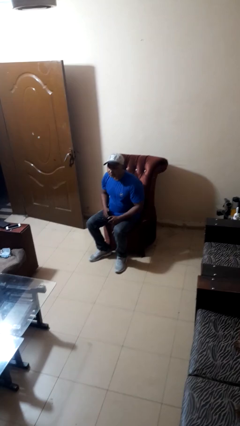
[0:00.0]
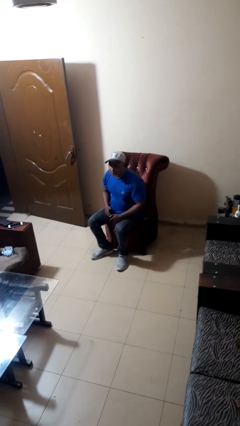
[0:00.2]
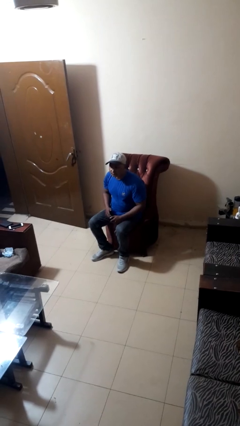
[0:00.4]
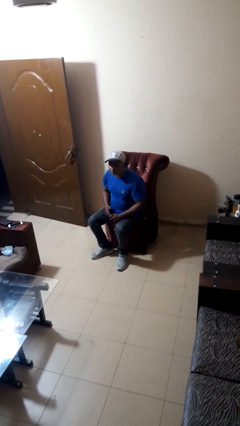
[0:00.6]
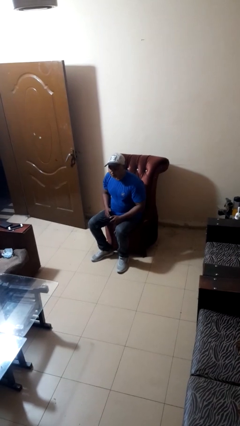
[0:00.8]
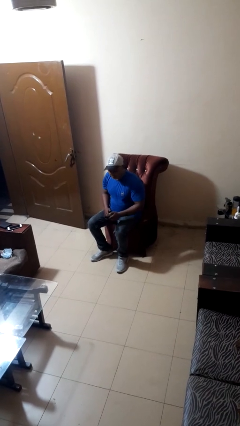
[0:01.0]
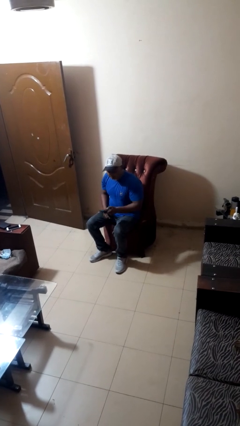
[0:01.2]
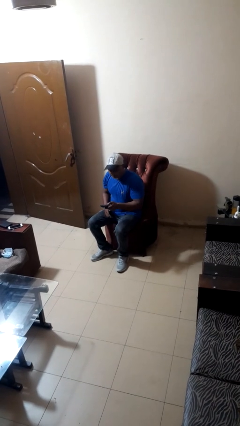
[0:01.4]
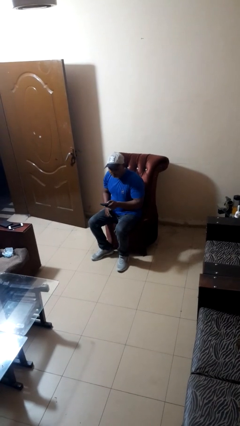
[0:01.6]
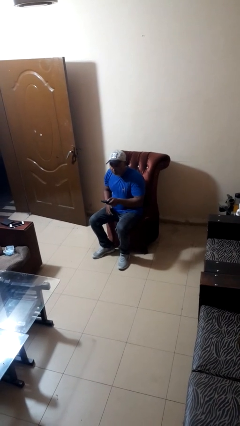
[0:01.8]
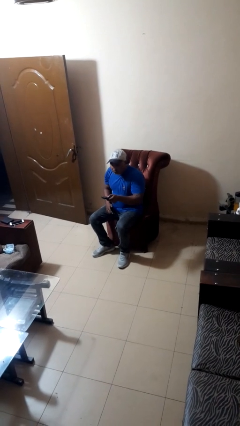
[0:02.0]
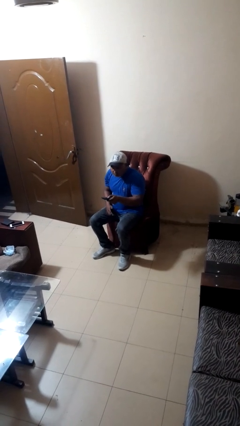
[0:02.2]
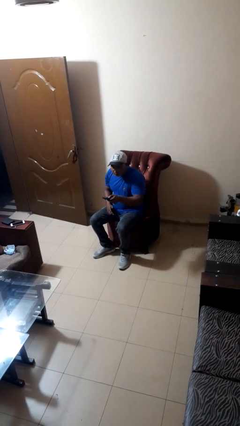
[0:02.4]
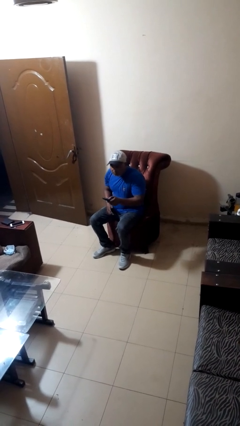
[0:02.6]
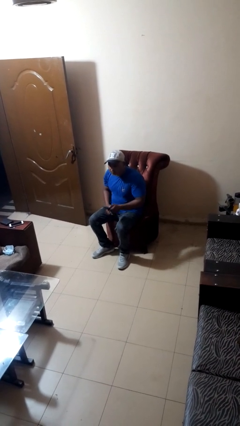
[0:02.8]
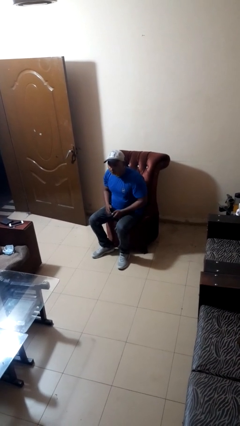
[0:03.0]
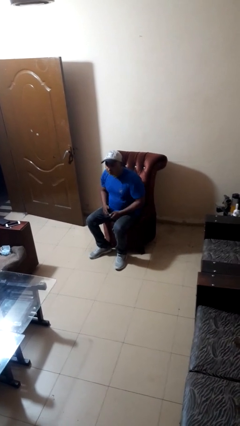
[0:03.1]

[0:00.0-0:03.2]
person uses television remote

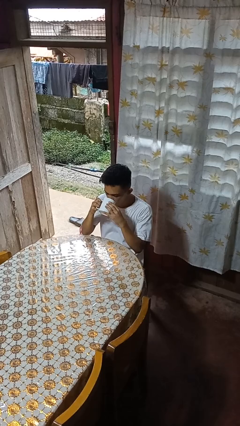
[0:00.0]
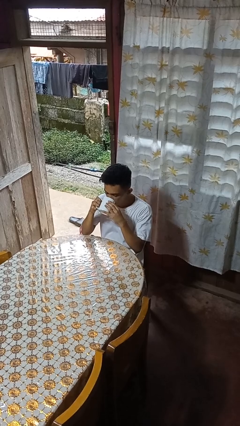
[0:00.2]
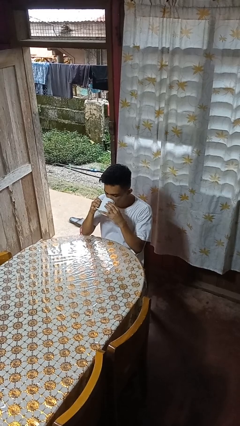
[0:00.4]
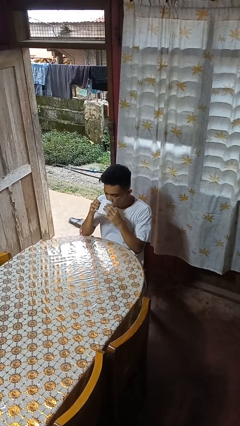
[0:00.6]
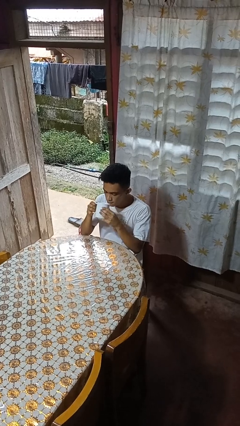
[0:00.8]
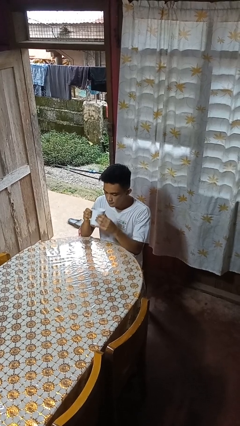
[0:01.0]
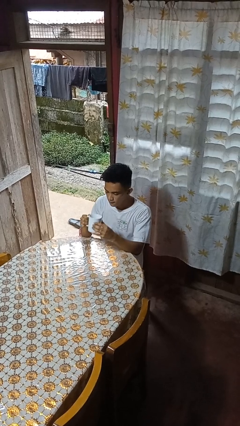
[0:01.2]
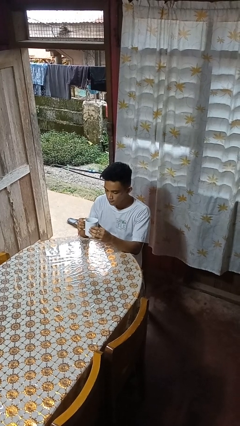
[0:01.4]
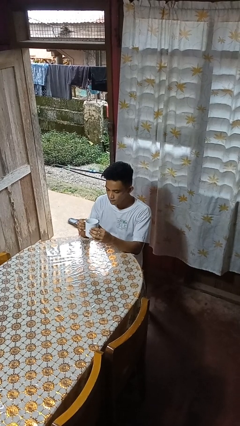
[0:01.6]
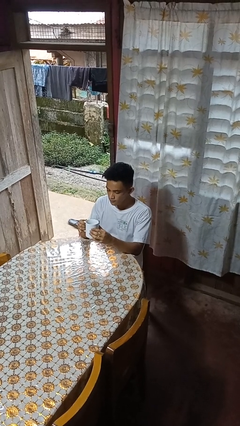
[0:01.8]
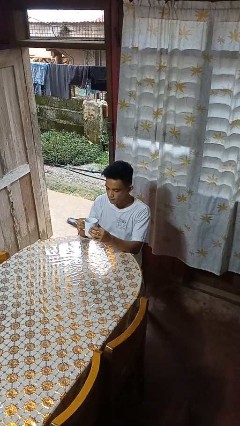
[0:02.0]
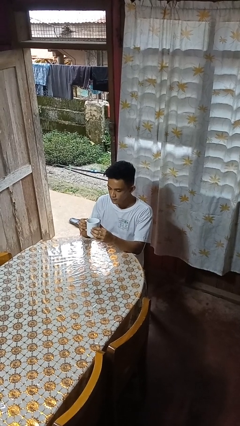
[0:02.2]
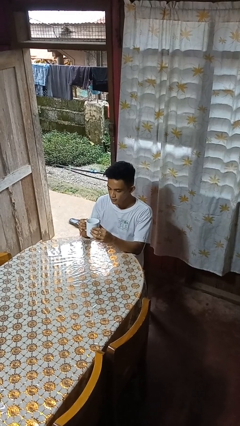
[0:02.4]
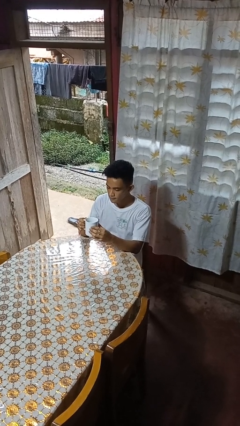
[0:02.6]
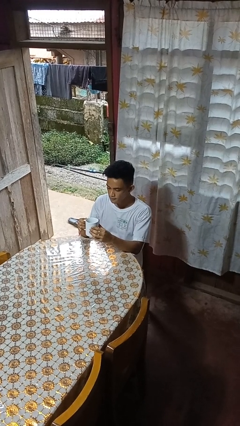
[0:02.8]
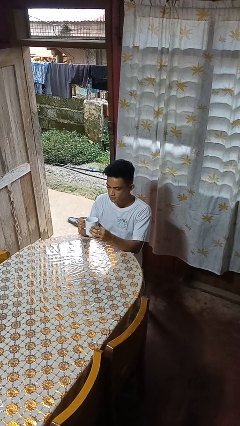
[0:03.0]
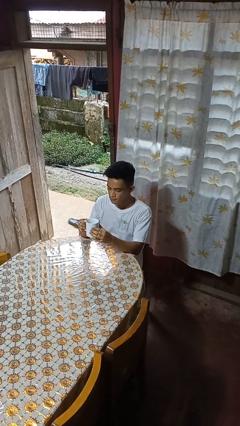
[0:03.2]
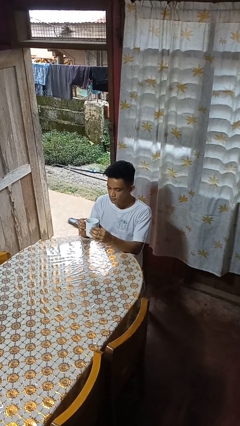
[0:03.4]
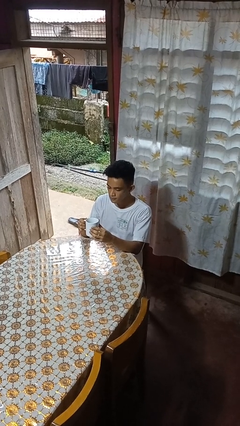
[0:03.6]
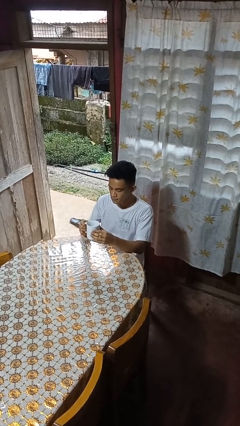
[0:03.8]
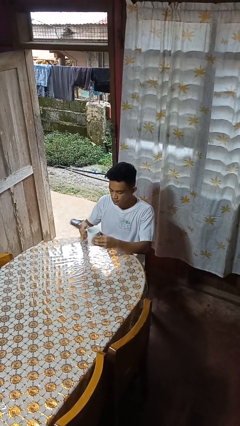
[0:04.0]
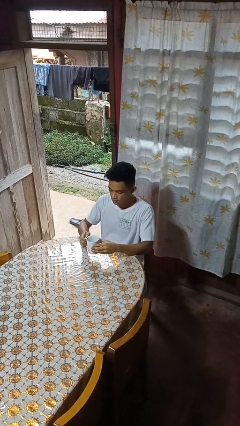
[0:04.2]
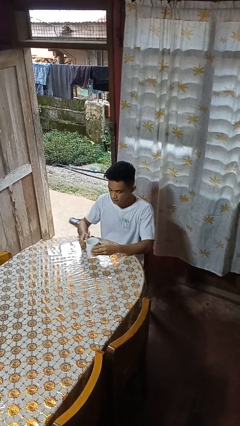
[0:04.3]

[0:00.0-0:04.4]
person drinks from mug

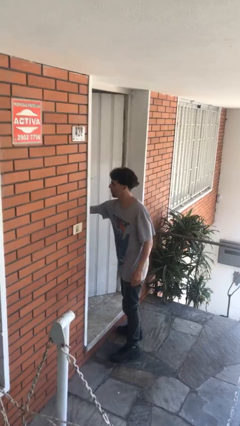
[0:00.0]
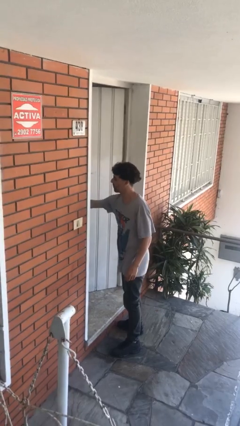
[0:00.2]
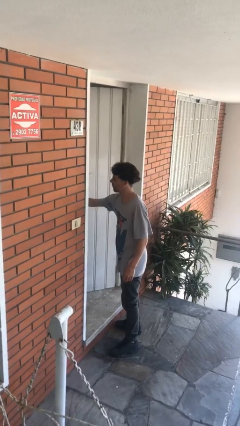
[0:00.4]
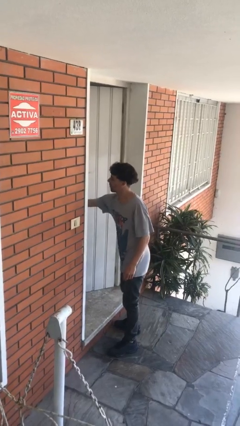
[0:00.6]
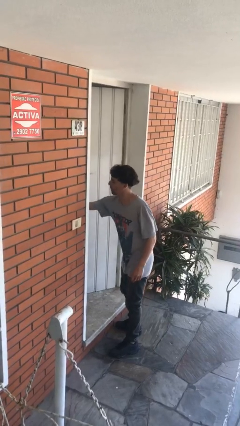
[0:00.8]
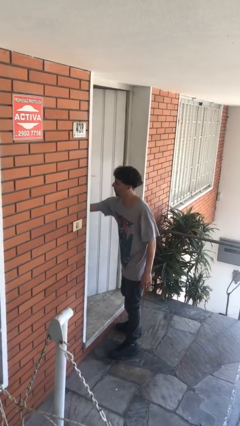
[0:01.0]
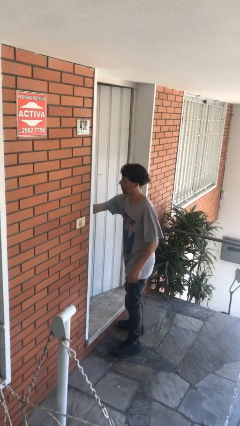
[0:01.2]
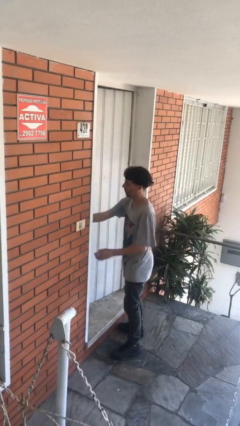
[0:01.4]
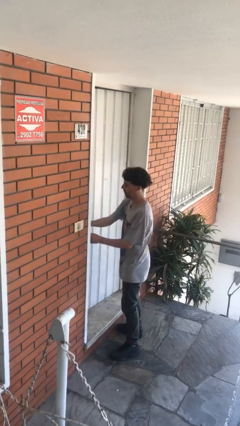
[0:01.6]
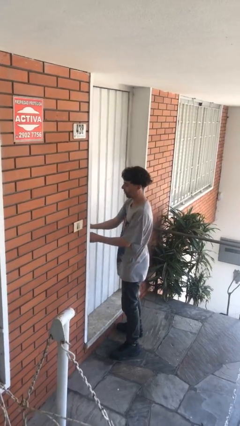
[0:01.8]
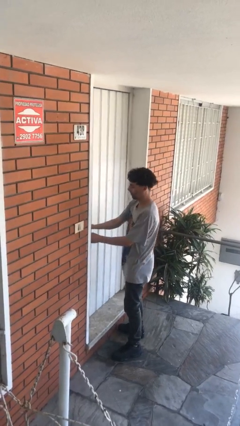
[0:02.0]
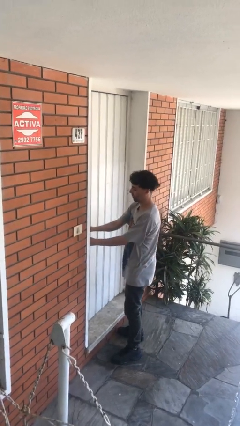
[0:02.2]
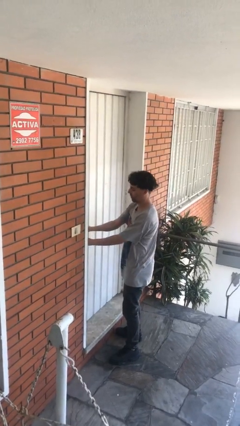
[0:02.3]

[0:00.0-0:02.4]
person closes facility door

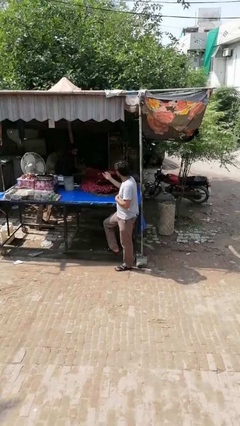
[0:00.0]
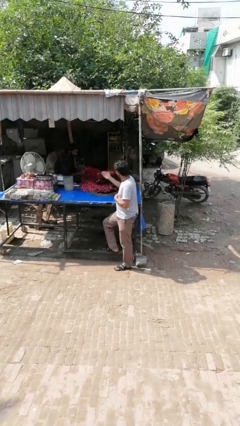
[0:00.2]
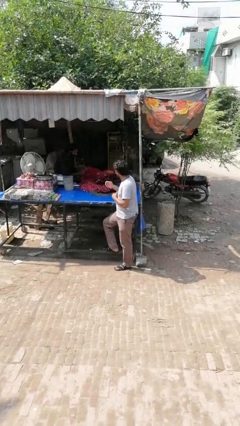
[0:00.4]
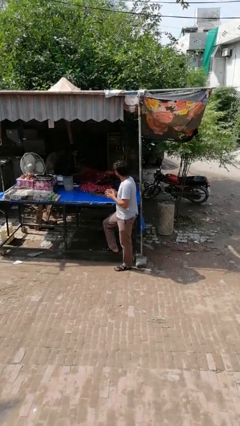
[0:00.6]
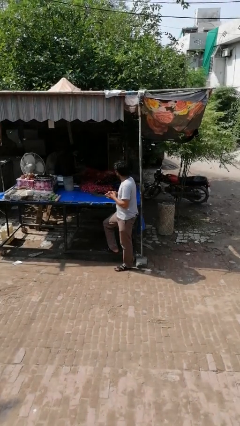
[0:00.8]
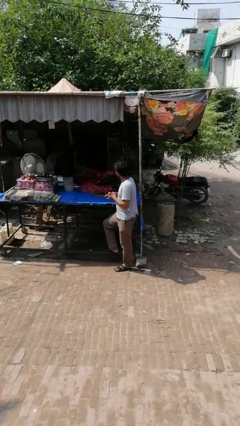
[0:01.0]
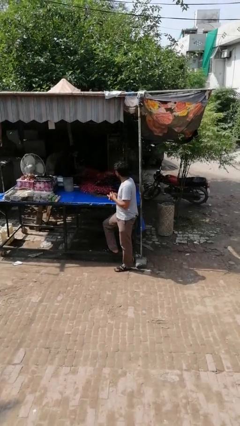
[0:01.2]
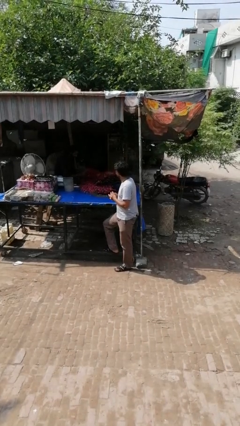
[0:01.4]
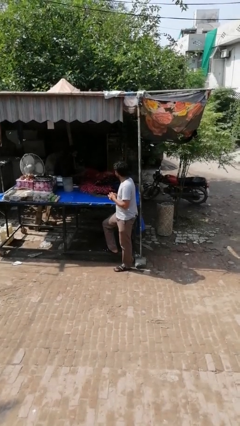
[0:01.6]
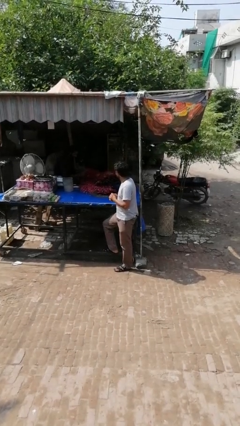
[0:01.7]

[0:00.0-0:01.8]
person talks to person

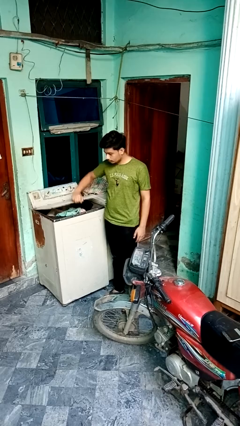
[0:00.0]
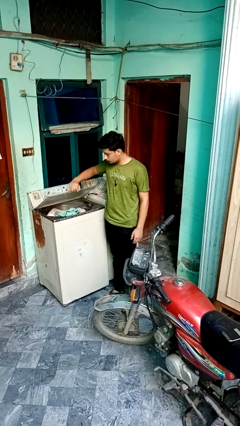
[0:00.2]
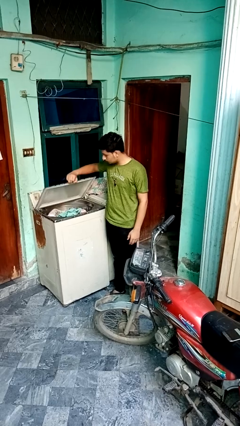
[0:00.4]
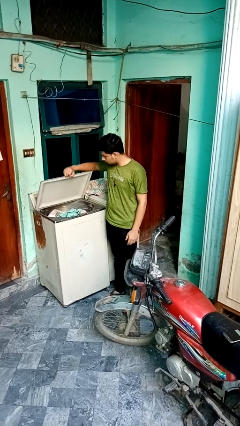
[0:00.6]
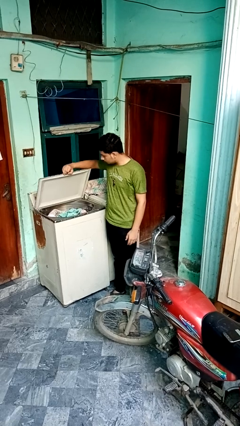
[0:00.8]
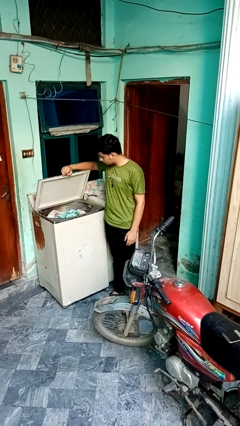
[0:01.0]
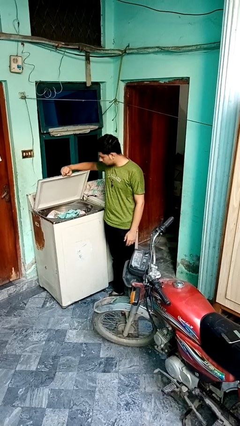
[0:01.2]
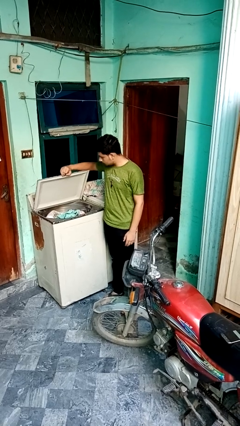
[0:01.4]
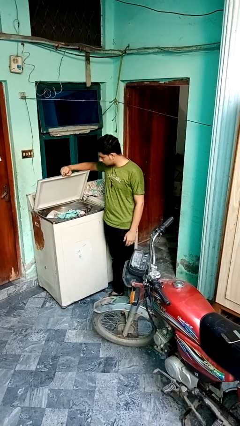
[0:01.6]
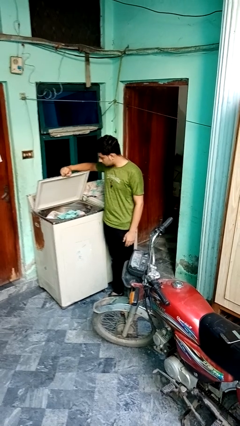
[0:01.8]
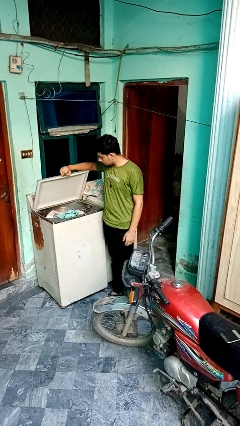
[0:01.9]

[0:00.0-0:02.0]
person opens clothes washer

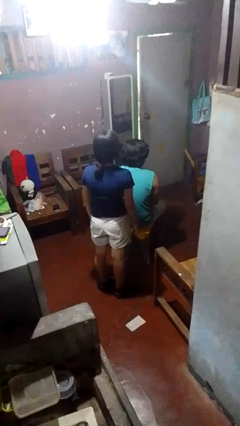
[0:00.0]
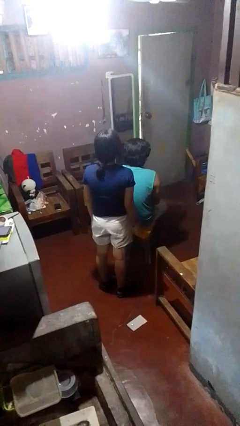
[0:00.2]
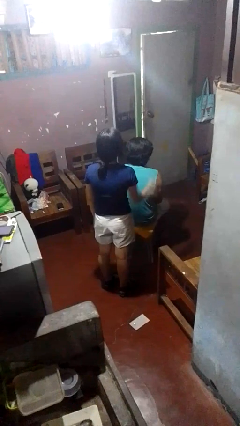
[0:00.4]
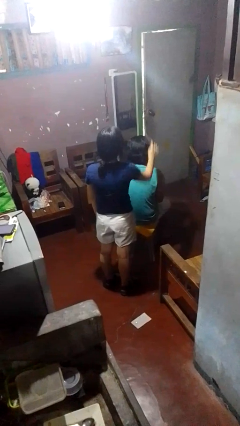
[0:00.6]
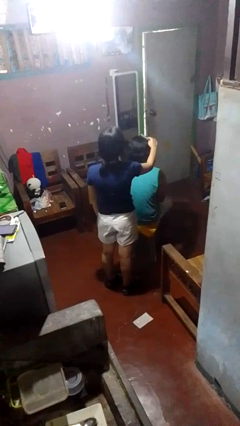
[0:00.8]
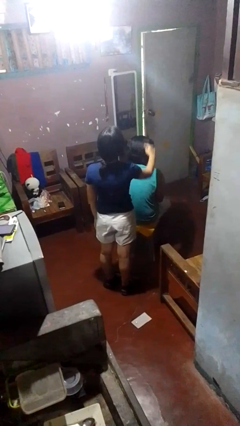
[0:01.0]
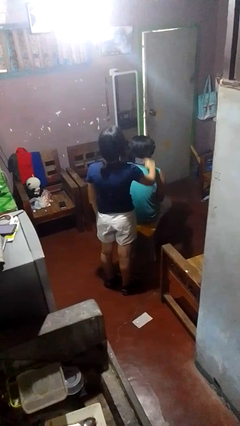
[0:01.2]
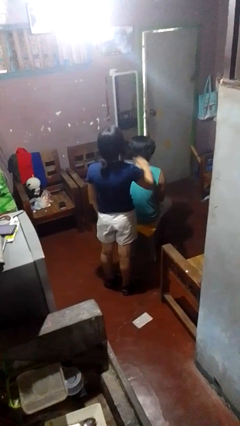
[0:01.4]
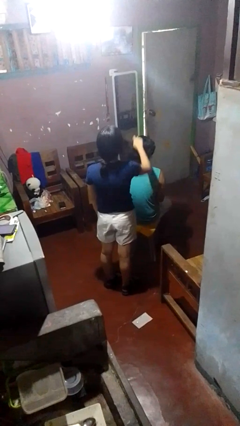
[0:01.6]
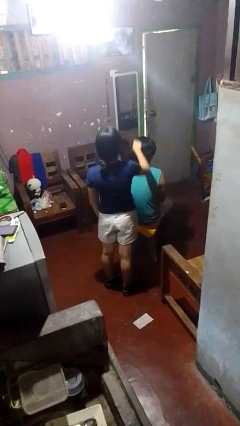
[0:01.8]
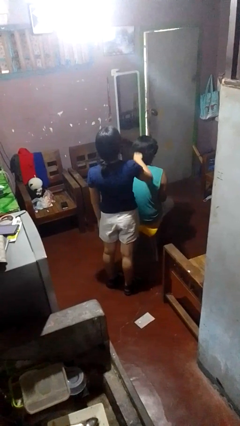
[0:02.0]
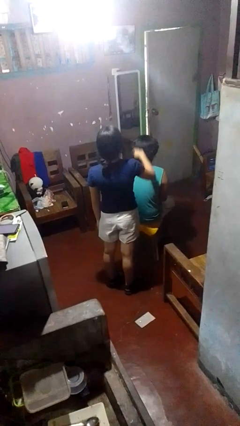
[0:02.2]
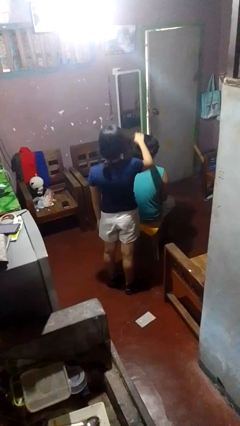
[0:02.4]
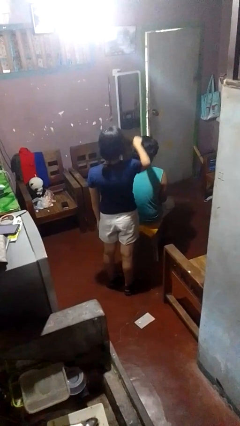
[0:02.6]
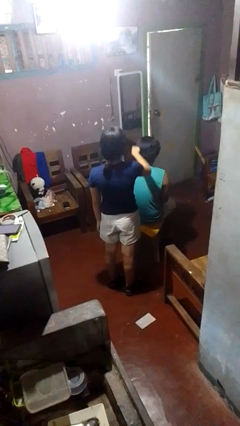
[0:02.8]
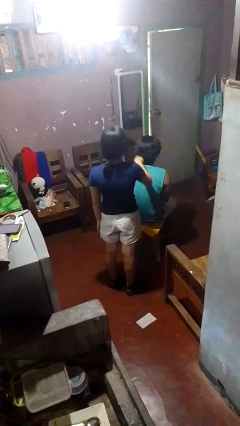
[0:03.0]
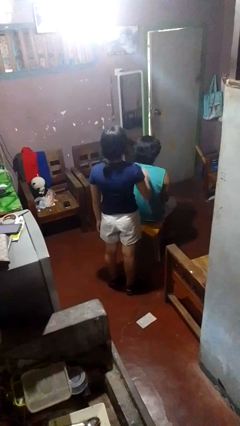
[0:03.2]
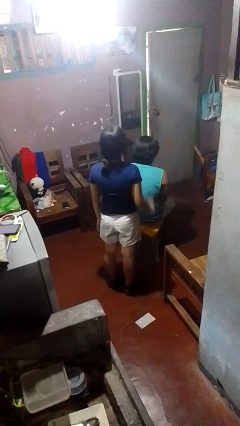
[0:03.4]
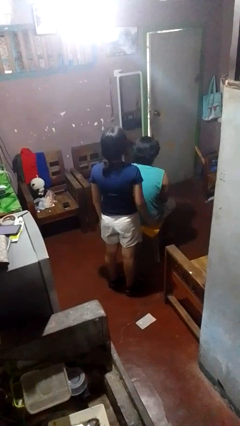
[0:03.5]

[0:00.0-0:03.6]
person brushes hair of person

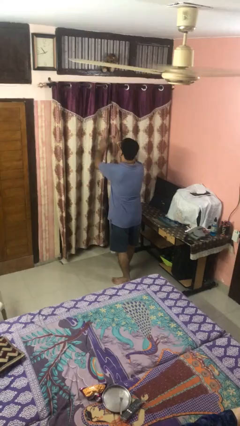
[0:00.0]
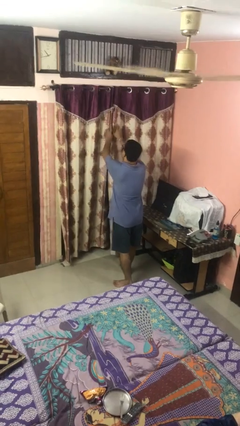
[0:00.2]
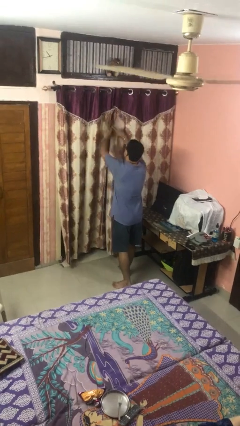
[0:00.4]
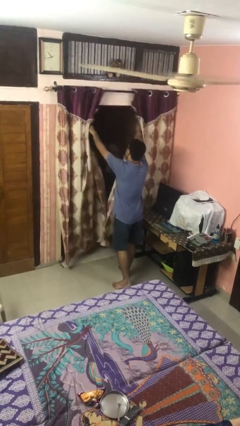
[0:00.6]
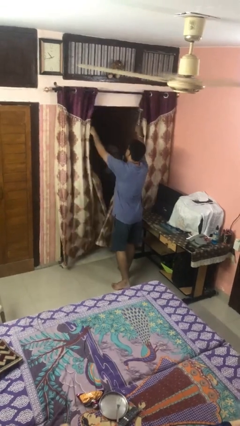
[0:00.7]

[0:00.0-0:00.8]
person opens curtains
